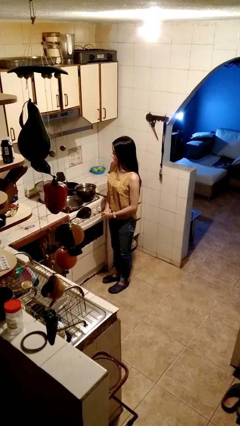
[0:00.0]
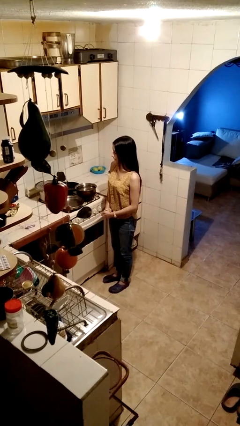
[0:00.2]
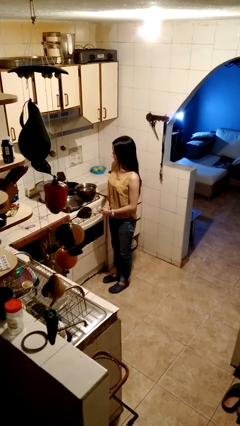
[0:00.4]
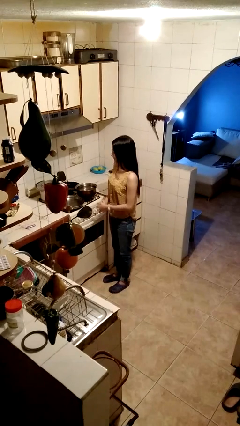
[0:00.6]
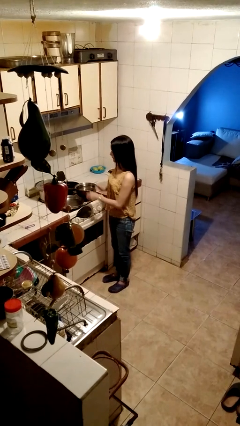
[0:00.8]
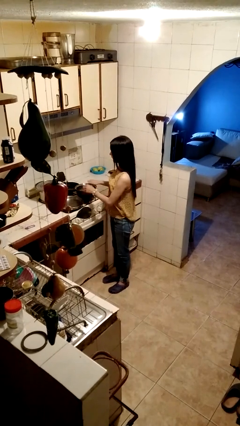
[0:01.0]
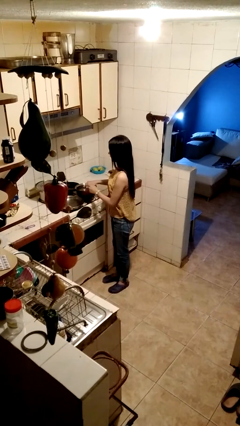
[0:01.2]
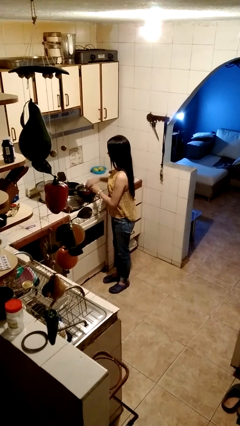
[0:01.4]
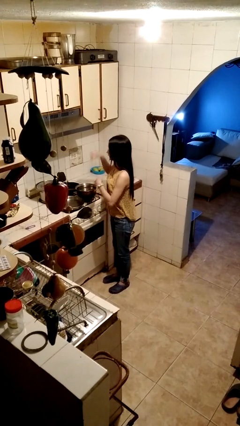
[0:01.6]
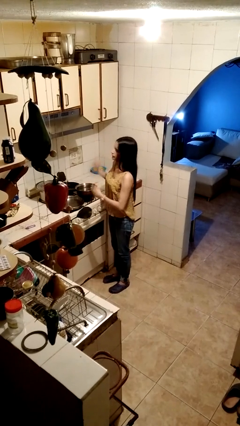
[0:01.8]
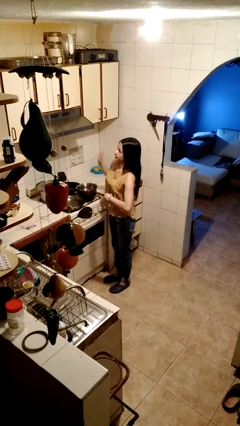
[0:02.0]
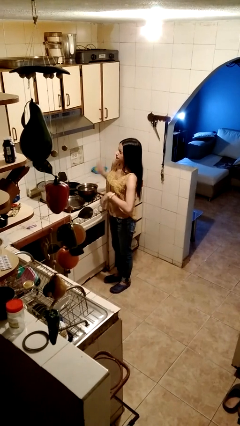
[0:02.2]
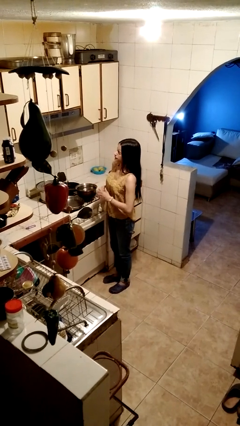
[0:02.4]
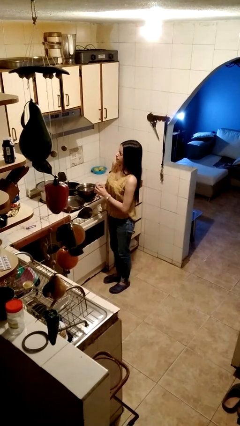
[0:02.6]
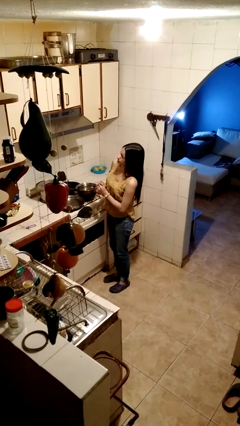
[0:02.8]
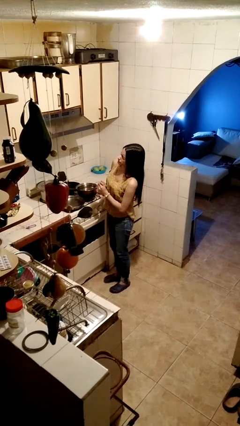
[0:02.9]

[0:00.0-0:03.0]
person burns hand

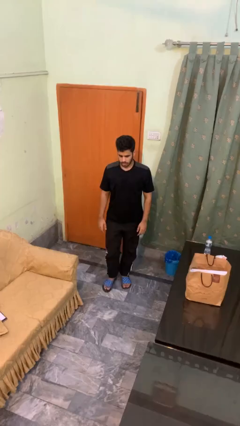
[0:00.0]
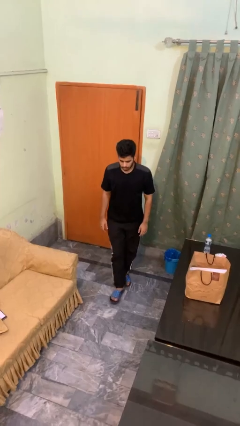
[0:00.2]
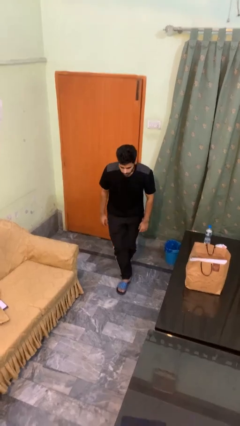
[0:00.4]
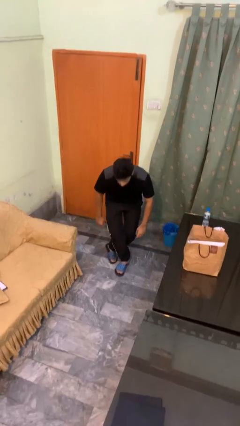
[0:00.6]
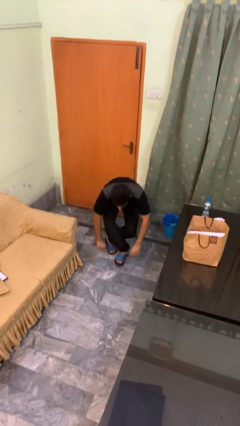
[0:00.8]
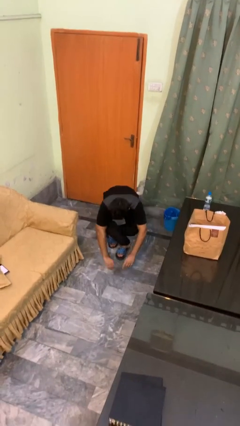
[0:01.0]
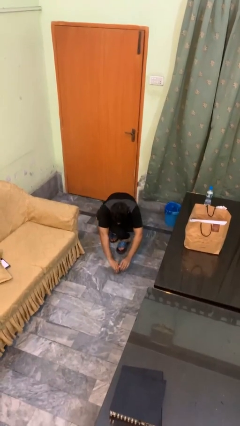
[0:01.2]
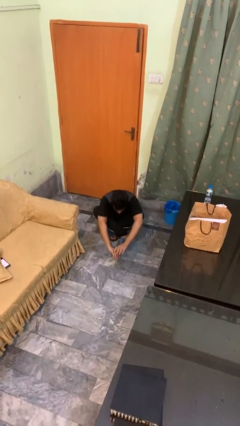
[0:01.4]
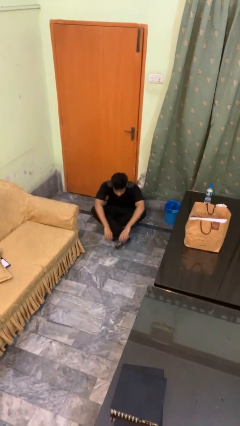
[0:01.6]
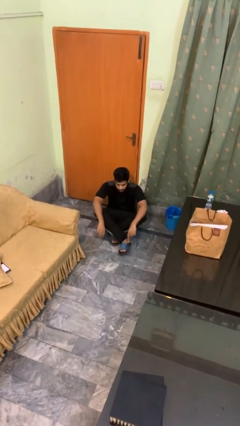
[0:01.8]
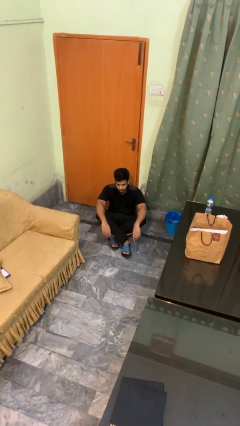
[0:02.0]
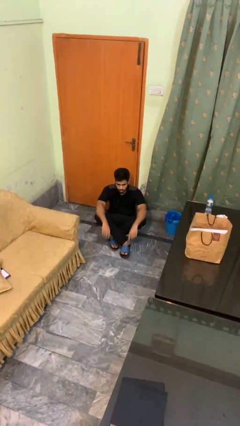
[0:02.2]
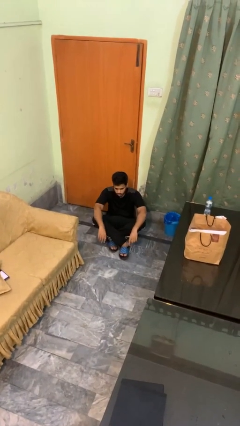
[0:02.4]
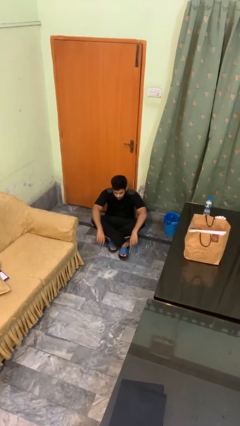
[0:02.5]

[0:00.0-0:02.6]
person sits crisscross

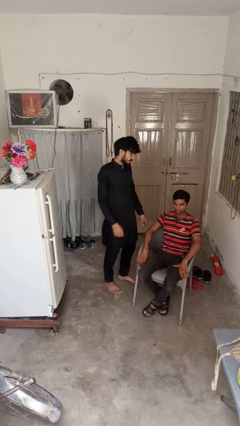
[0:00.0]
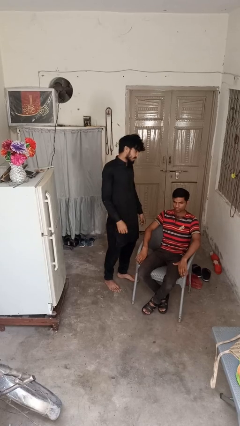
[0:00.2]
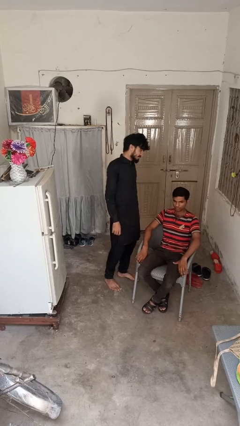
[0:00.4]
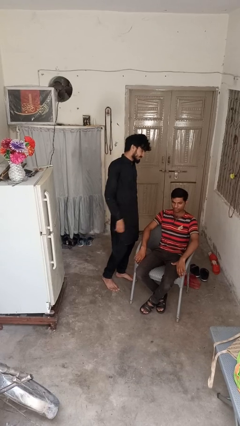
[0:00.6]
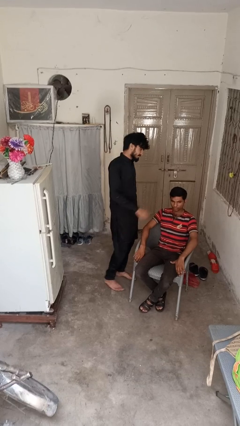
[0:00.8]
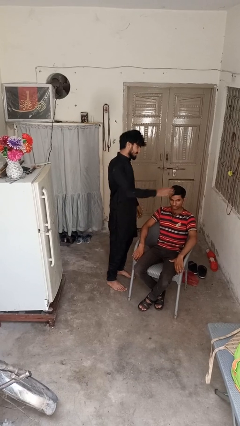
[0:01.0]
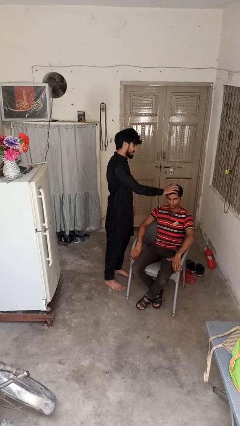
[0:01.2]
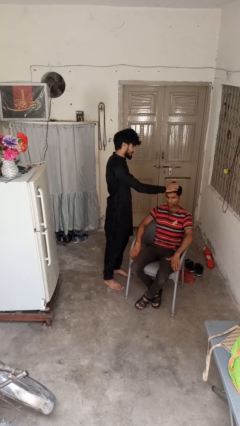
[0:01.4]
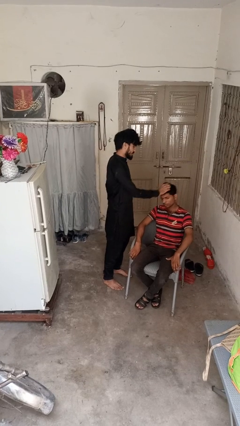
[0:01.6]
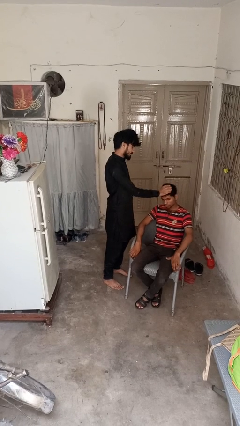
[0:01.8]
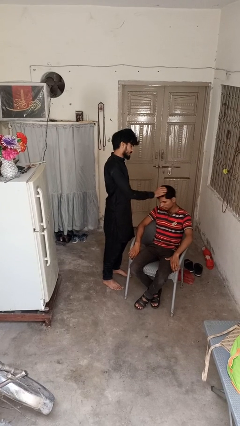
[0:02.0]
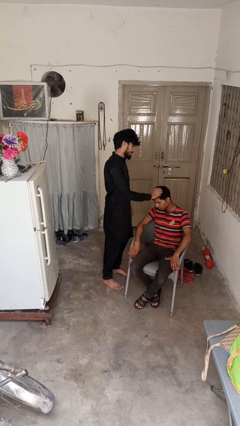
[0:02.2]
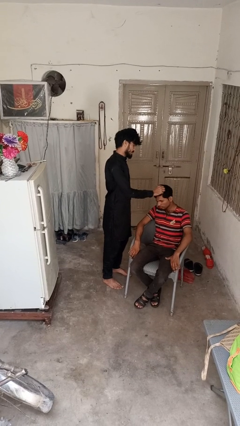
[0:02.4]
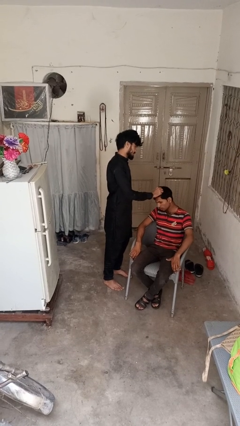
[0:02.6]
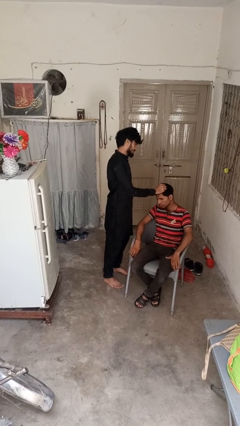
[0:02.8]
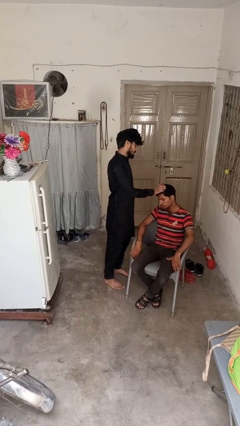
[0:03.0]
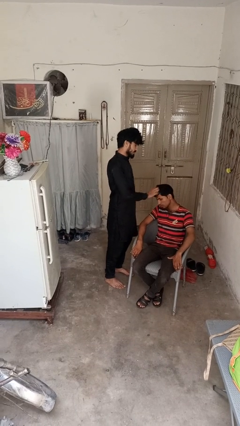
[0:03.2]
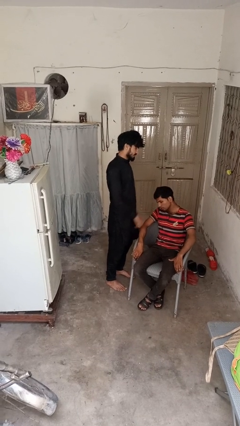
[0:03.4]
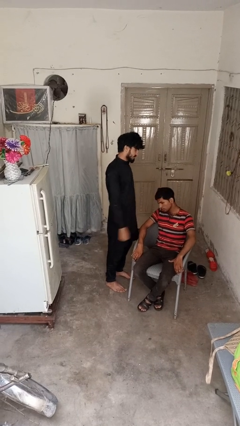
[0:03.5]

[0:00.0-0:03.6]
person grabs person by hair

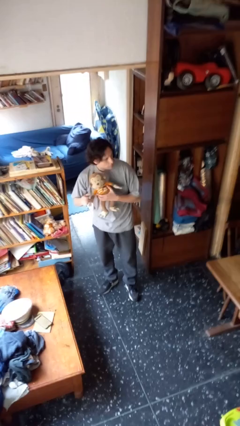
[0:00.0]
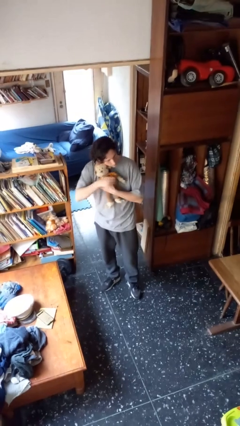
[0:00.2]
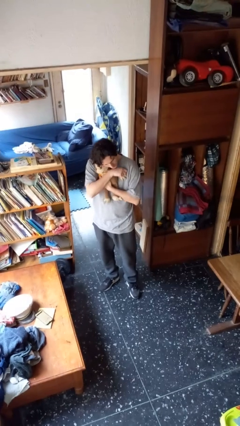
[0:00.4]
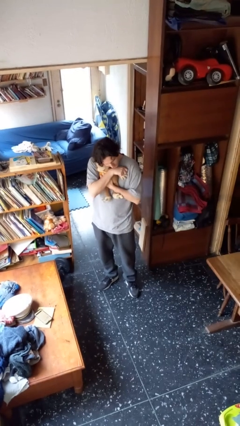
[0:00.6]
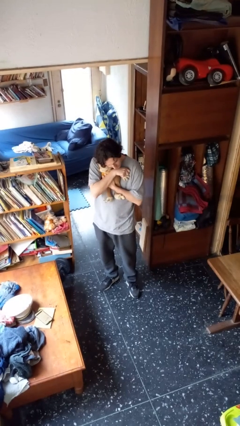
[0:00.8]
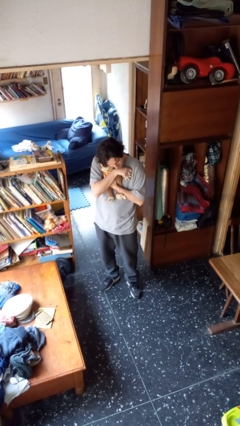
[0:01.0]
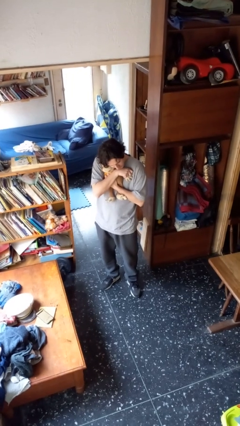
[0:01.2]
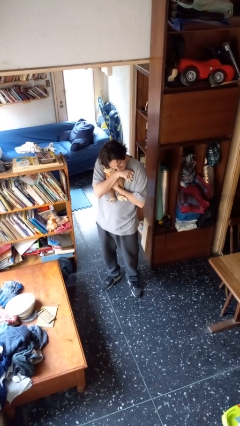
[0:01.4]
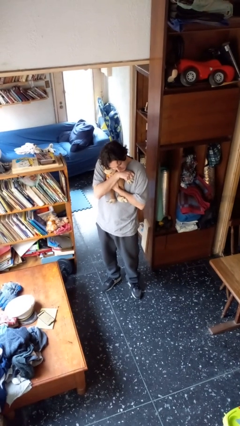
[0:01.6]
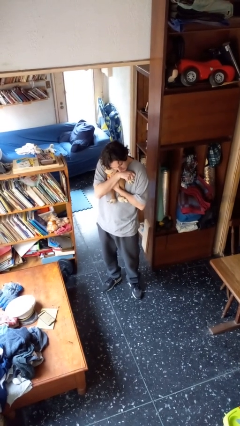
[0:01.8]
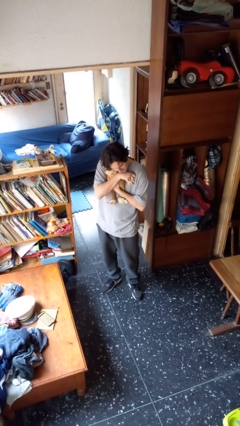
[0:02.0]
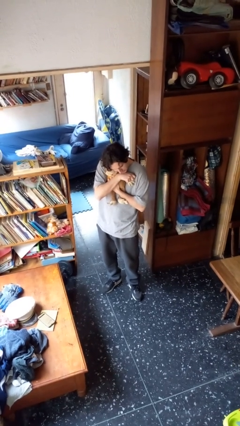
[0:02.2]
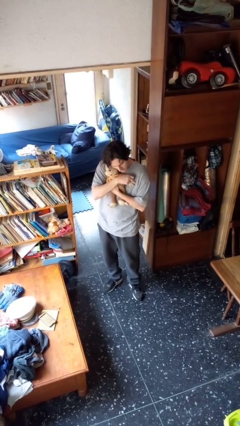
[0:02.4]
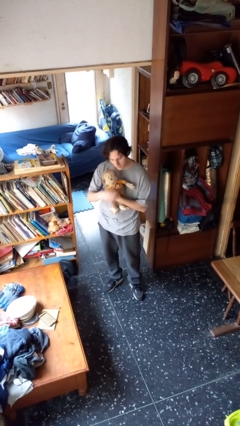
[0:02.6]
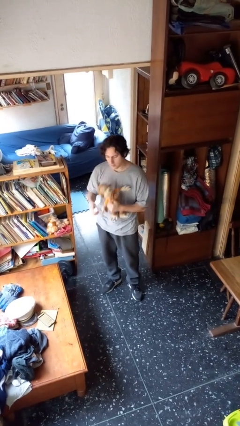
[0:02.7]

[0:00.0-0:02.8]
person hugs stuffed animal

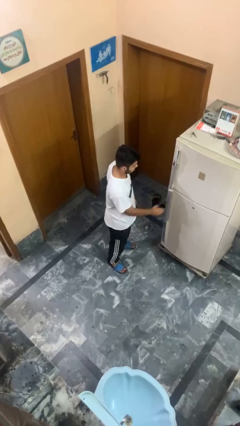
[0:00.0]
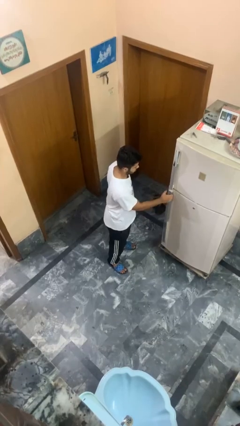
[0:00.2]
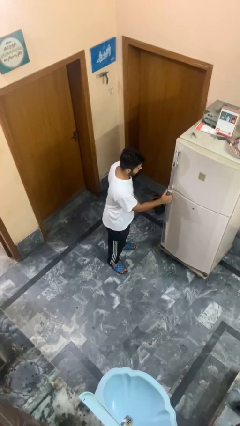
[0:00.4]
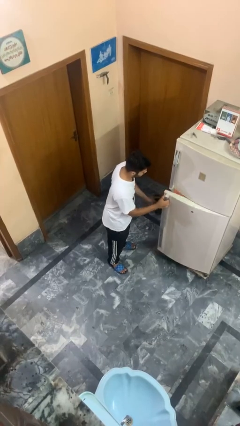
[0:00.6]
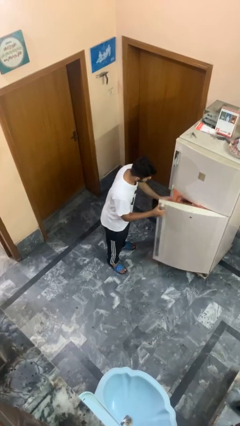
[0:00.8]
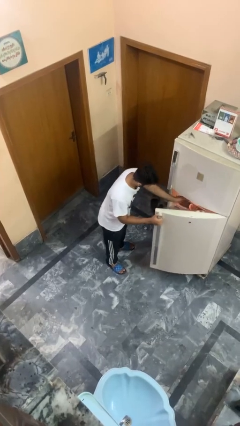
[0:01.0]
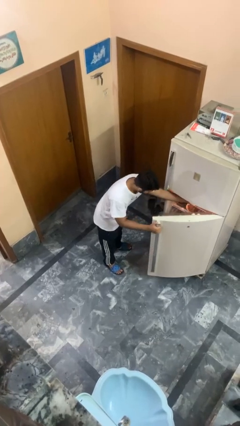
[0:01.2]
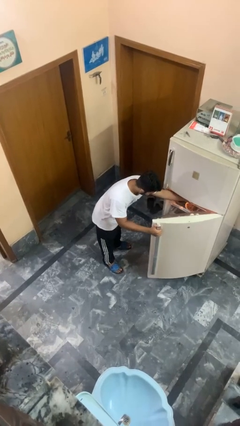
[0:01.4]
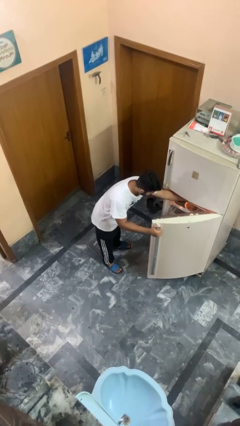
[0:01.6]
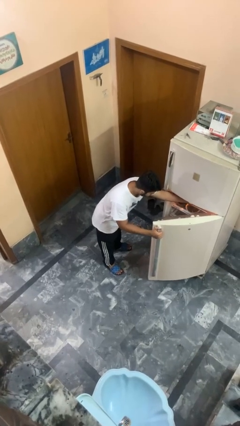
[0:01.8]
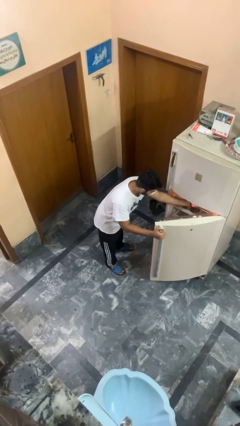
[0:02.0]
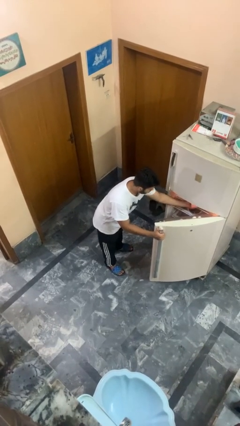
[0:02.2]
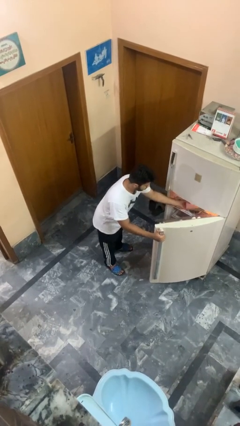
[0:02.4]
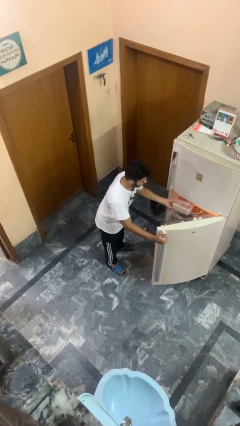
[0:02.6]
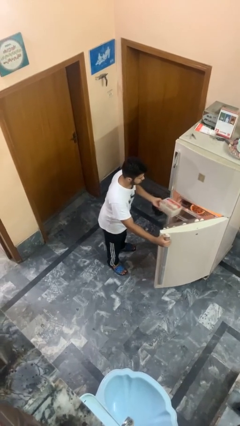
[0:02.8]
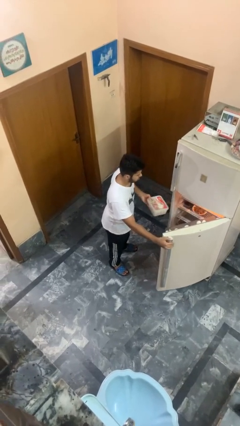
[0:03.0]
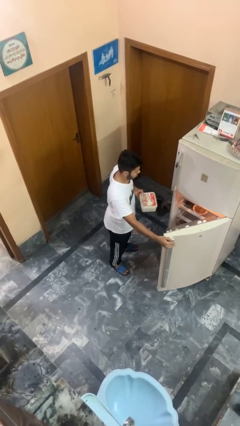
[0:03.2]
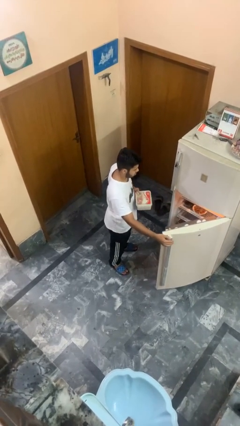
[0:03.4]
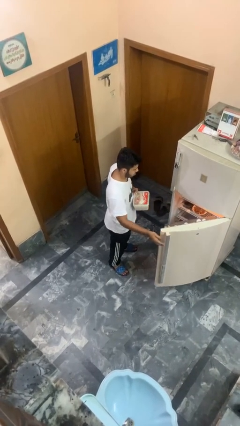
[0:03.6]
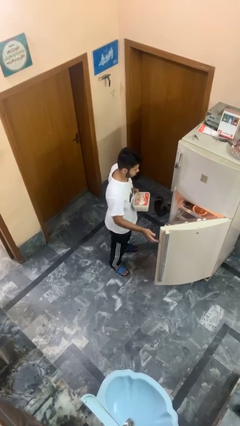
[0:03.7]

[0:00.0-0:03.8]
person takes object from refrigerator

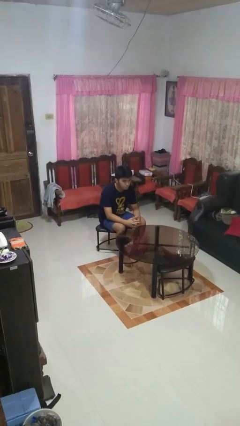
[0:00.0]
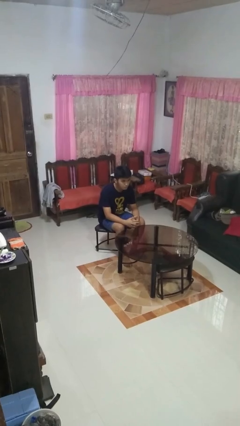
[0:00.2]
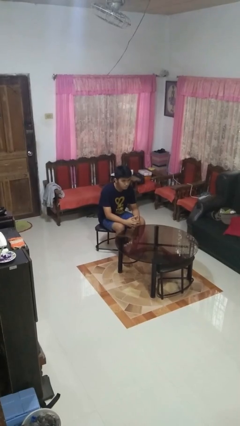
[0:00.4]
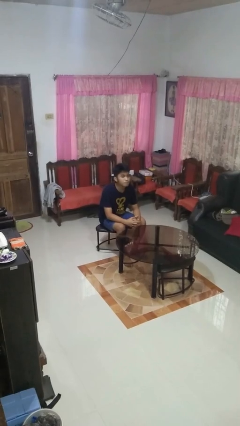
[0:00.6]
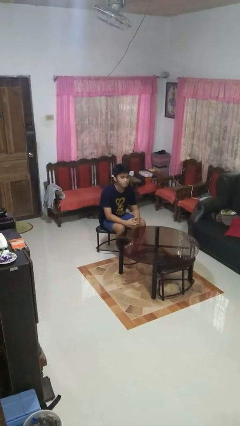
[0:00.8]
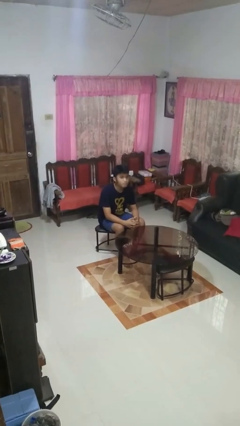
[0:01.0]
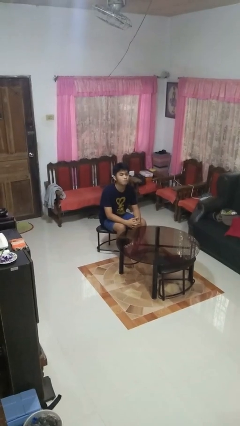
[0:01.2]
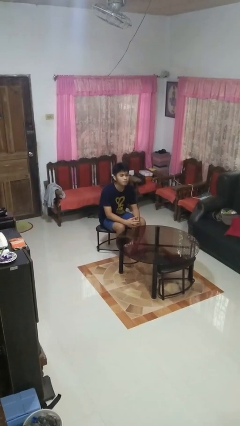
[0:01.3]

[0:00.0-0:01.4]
person nods head
